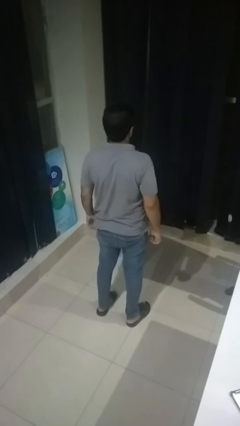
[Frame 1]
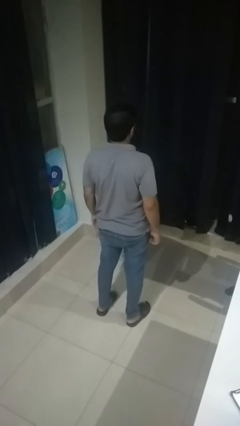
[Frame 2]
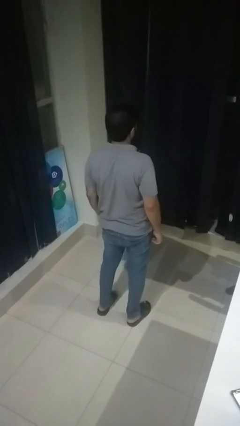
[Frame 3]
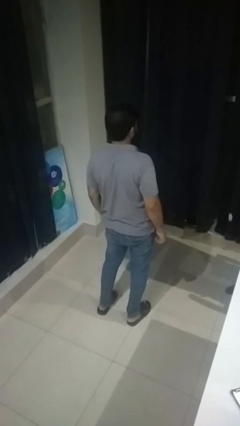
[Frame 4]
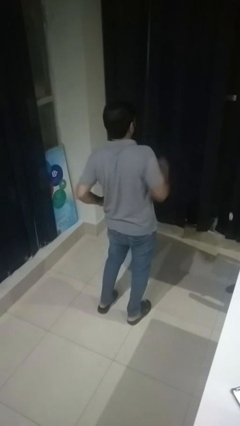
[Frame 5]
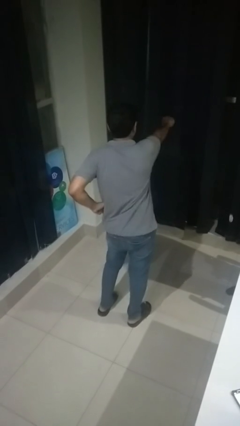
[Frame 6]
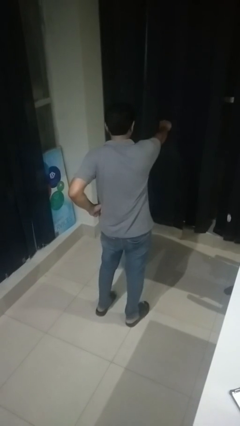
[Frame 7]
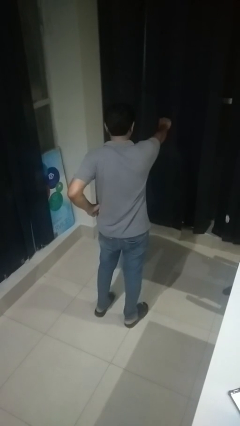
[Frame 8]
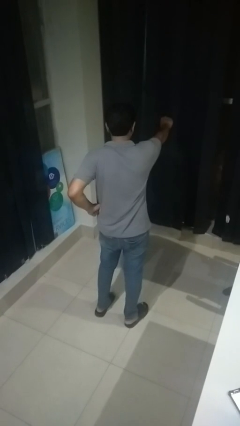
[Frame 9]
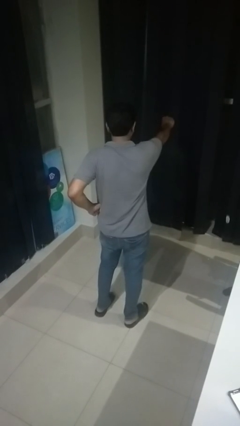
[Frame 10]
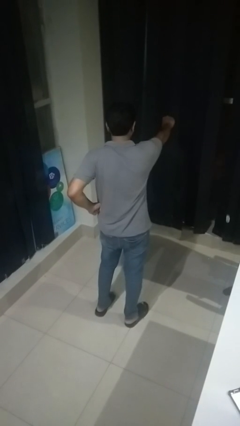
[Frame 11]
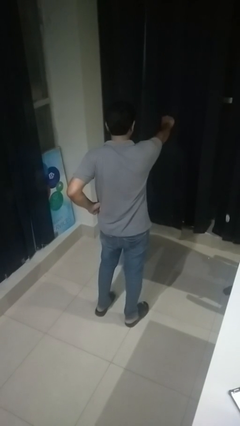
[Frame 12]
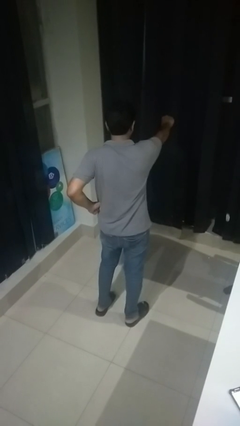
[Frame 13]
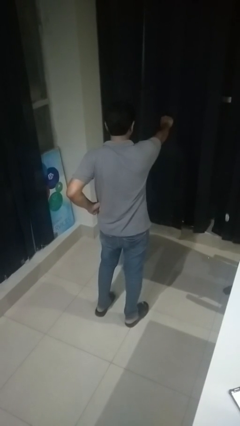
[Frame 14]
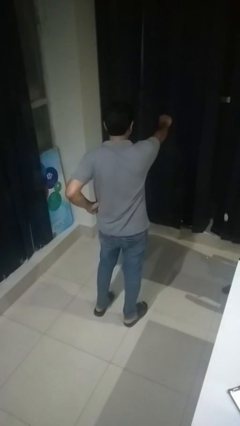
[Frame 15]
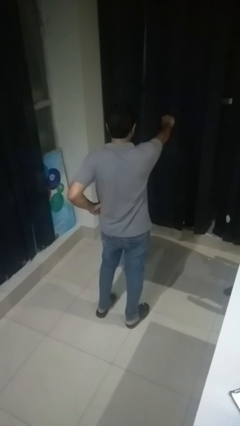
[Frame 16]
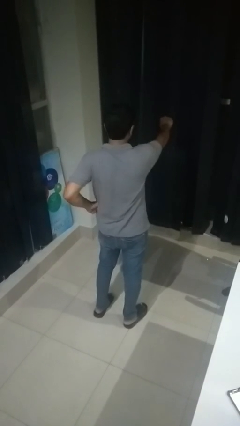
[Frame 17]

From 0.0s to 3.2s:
person punches

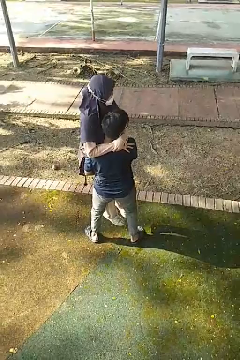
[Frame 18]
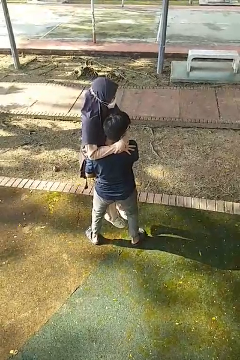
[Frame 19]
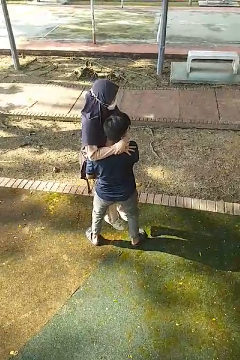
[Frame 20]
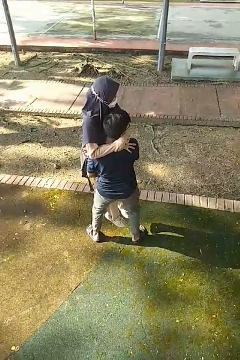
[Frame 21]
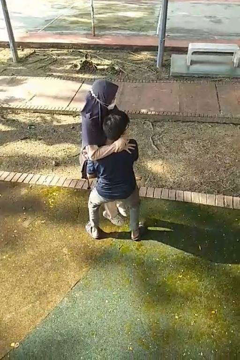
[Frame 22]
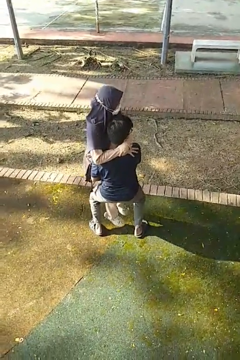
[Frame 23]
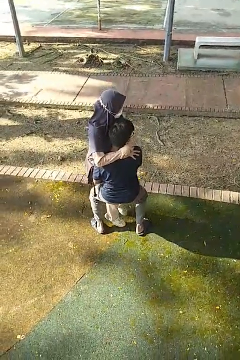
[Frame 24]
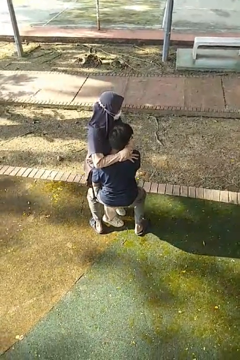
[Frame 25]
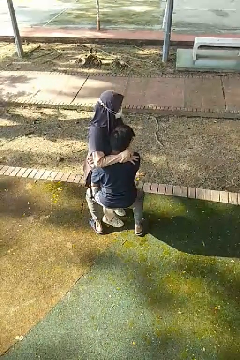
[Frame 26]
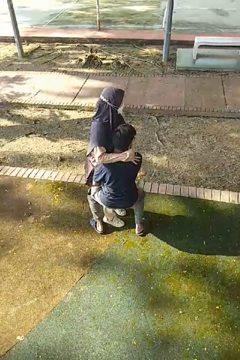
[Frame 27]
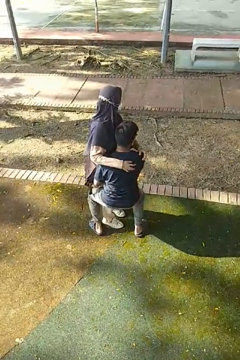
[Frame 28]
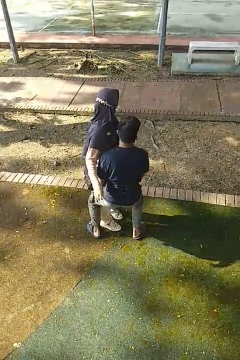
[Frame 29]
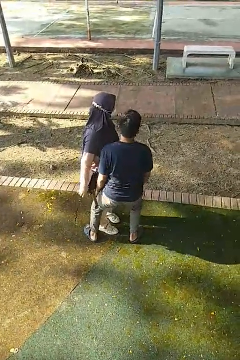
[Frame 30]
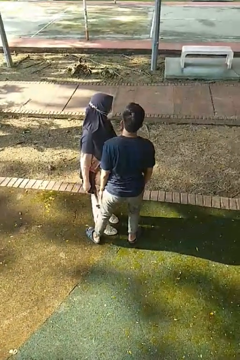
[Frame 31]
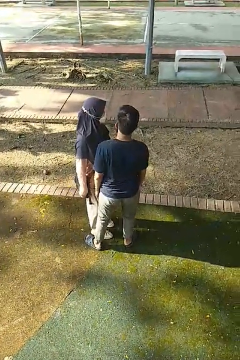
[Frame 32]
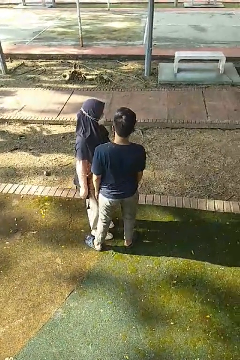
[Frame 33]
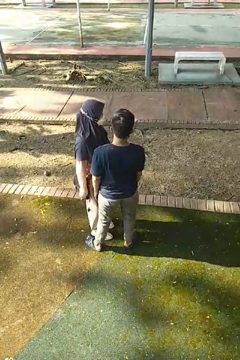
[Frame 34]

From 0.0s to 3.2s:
person puts down person

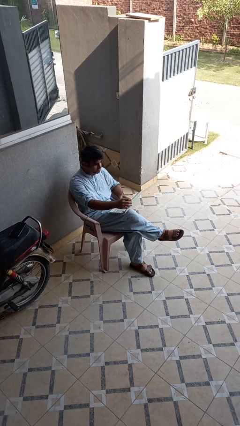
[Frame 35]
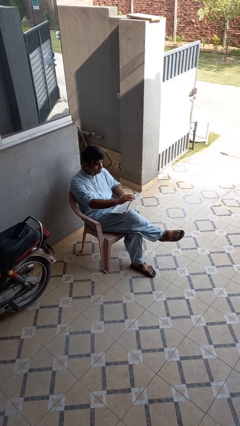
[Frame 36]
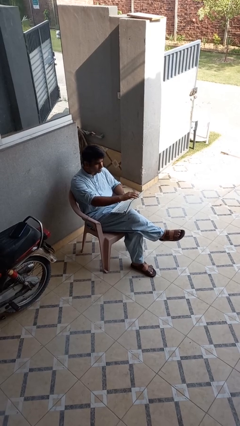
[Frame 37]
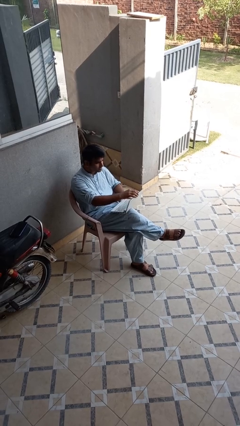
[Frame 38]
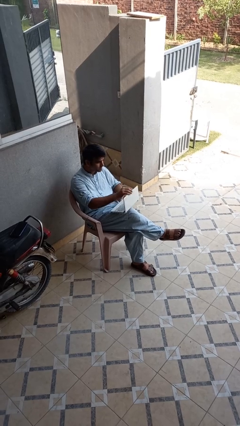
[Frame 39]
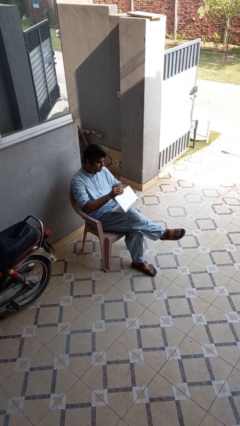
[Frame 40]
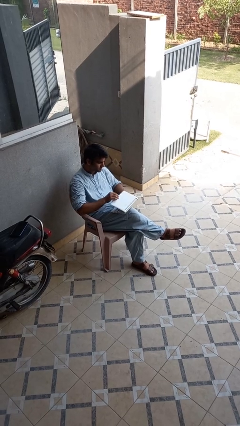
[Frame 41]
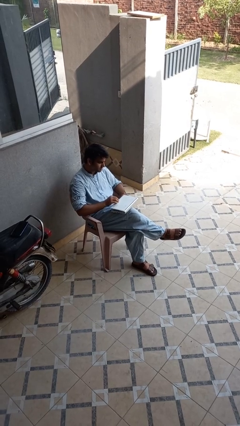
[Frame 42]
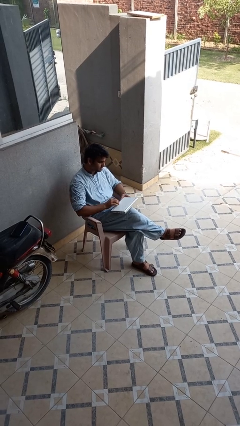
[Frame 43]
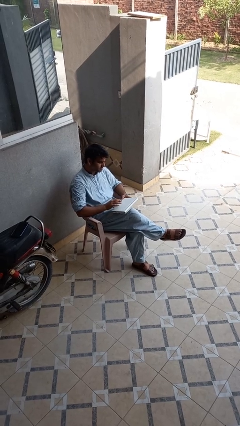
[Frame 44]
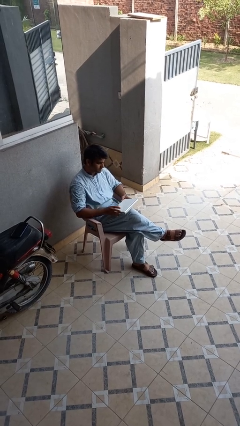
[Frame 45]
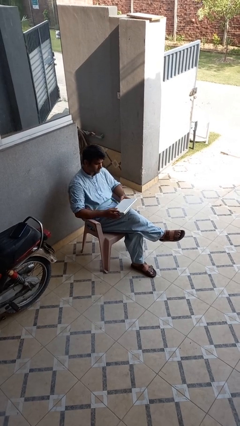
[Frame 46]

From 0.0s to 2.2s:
person closes laptop

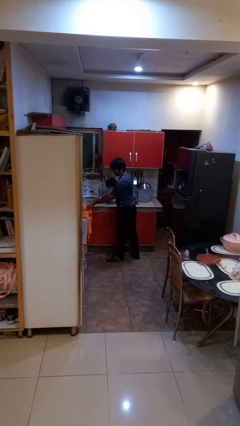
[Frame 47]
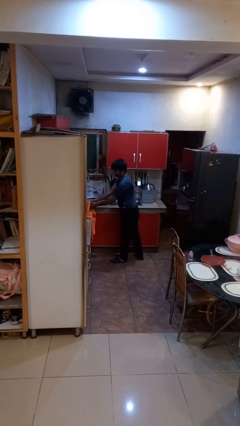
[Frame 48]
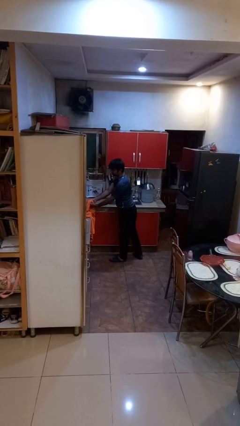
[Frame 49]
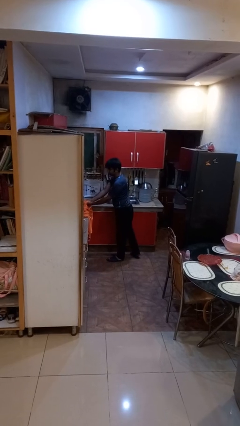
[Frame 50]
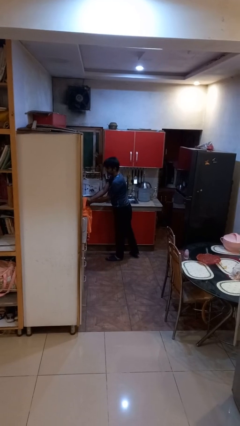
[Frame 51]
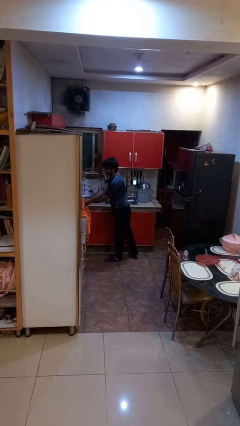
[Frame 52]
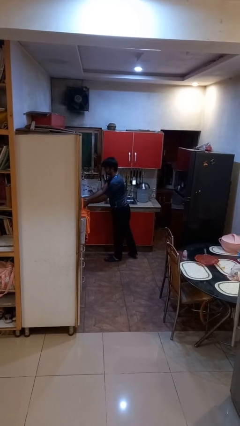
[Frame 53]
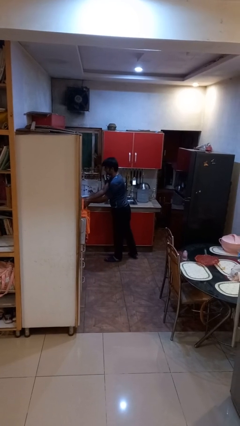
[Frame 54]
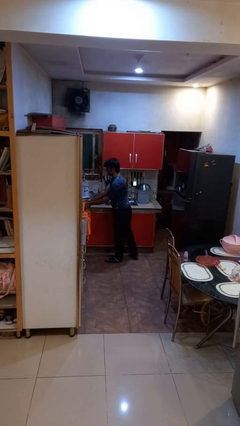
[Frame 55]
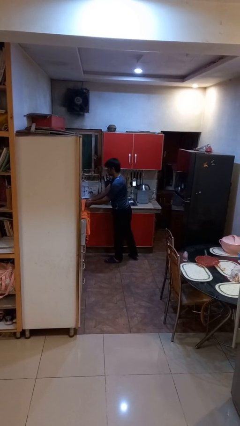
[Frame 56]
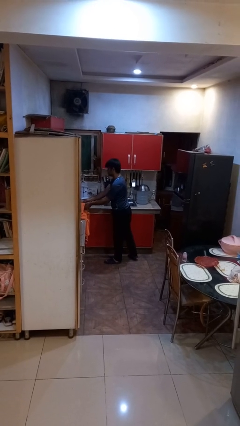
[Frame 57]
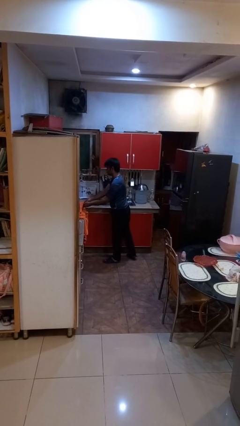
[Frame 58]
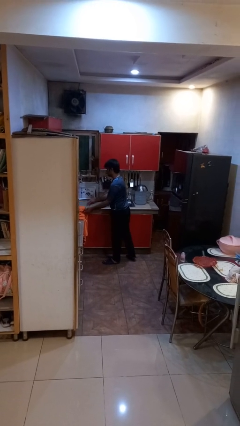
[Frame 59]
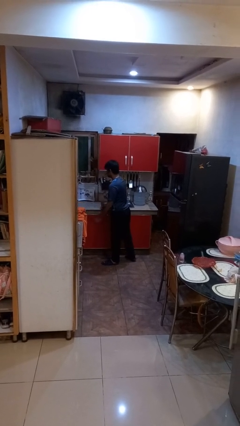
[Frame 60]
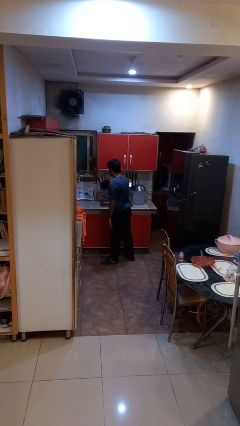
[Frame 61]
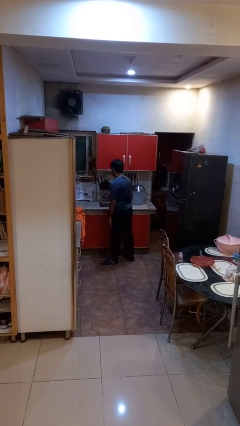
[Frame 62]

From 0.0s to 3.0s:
person dries hands with towel

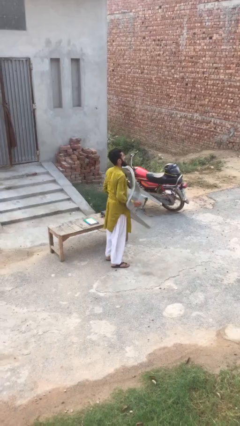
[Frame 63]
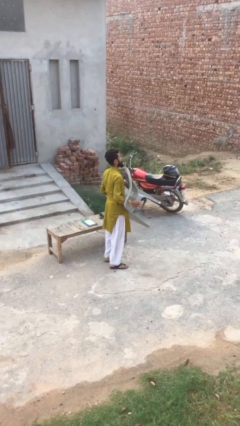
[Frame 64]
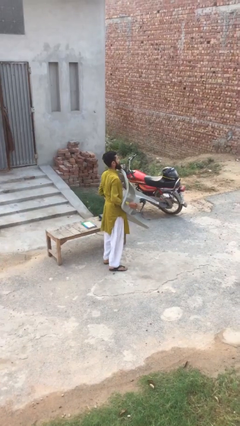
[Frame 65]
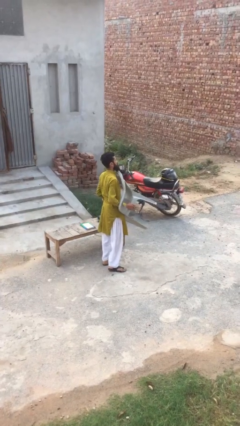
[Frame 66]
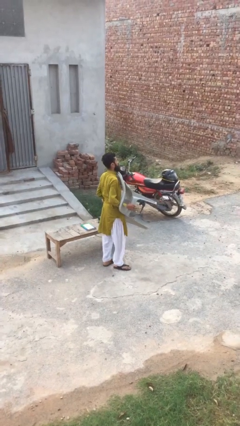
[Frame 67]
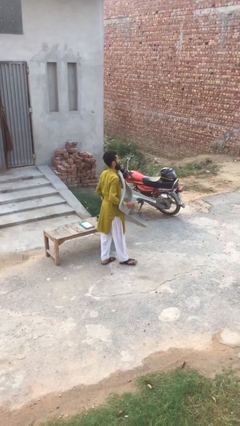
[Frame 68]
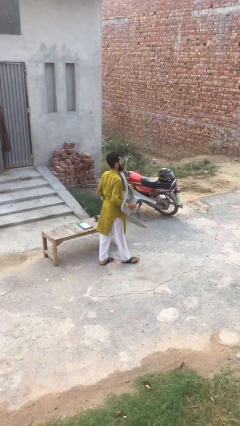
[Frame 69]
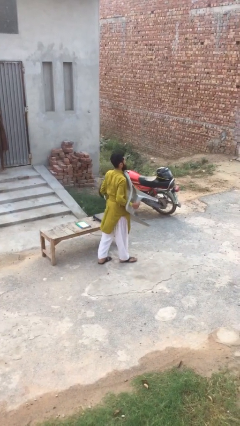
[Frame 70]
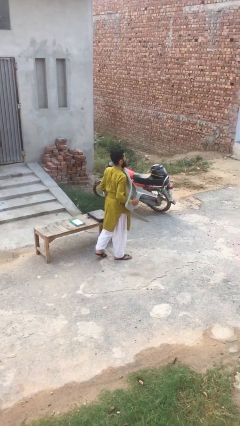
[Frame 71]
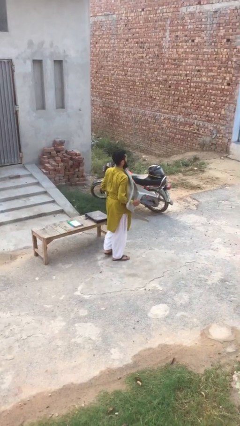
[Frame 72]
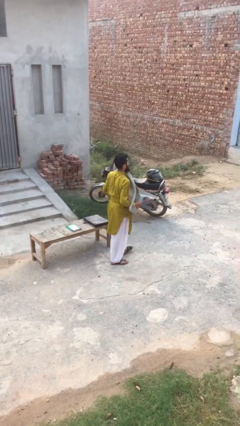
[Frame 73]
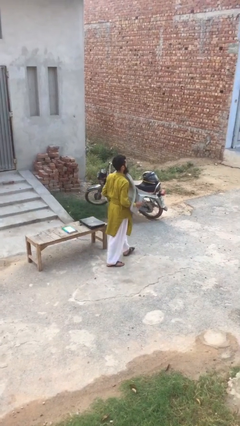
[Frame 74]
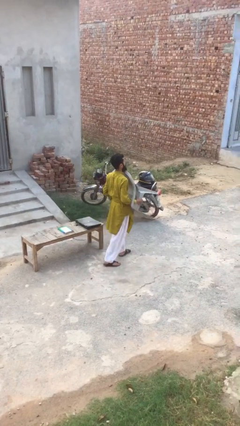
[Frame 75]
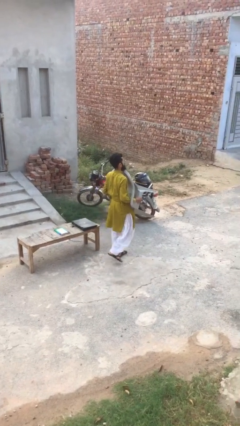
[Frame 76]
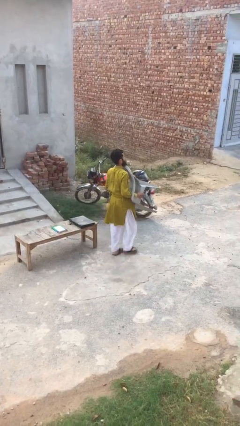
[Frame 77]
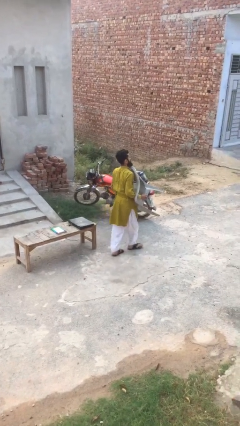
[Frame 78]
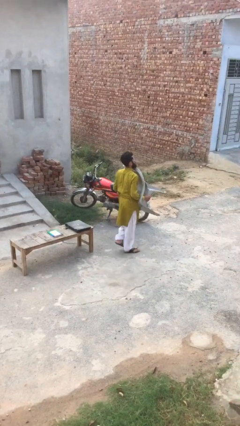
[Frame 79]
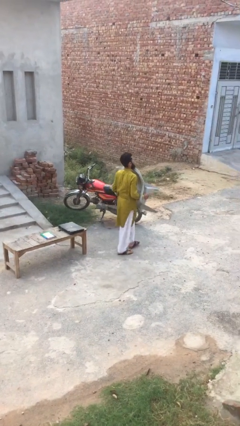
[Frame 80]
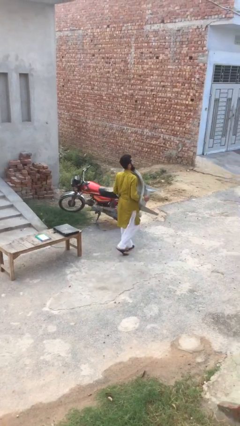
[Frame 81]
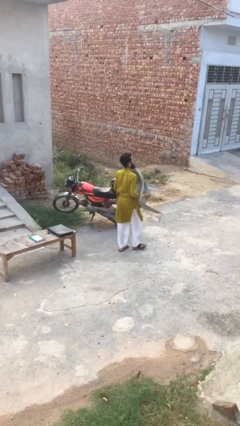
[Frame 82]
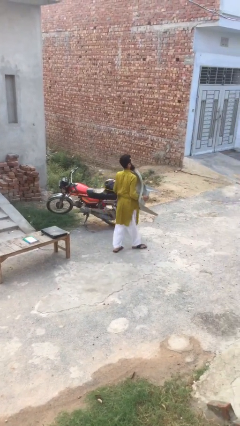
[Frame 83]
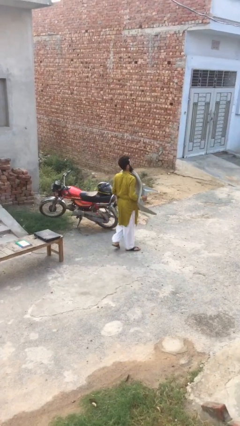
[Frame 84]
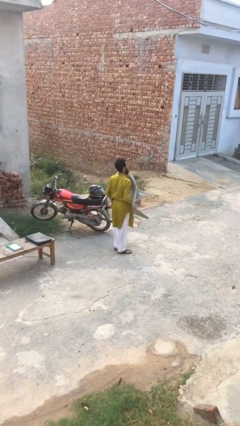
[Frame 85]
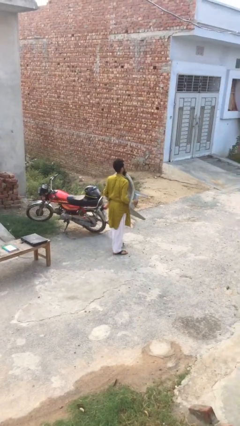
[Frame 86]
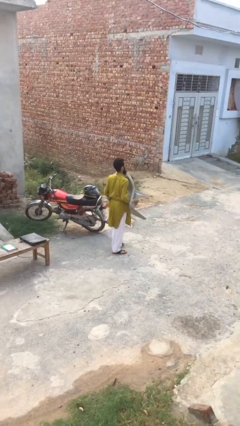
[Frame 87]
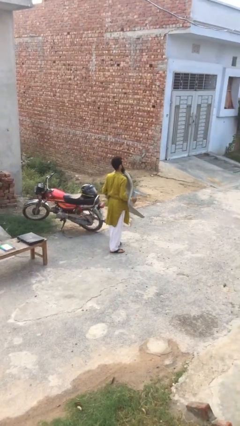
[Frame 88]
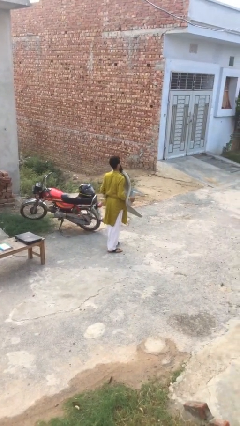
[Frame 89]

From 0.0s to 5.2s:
person carries heavy object

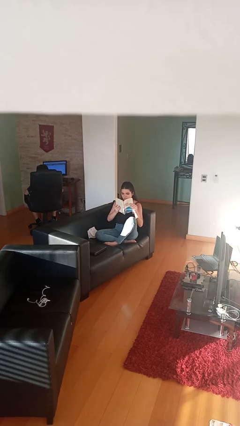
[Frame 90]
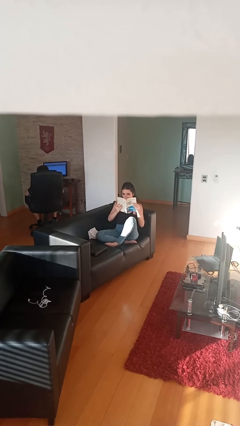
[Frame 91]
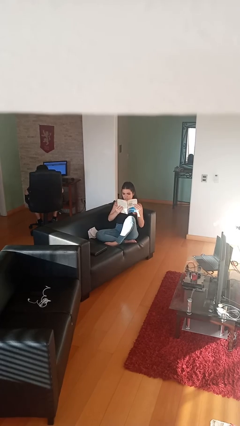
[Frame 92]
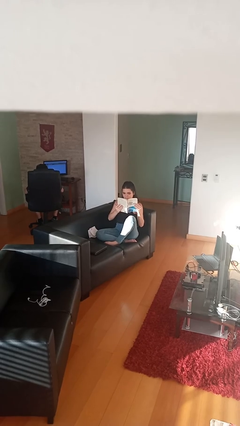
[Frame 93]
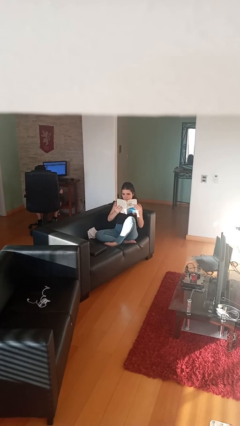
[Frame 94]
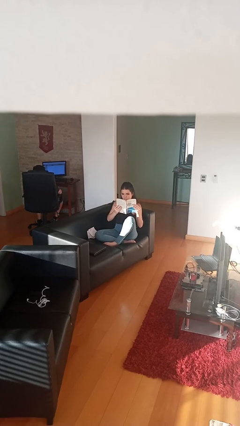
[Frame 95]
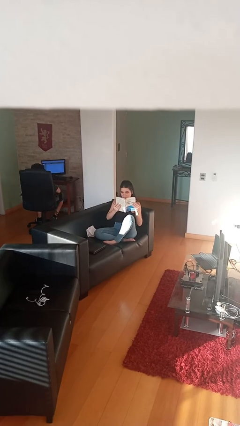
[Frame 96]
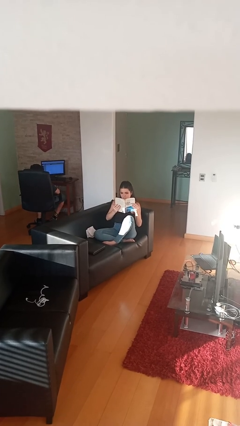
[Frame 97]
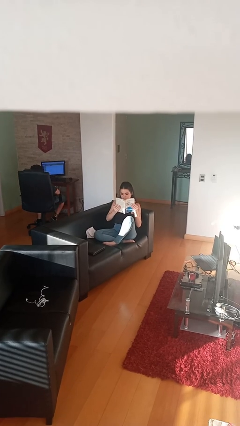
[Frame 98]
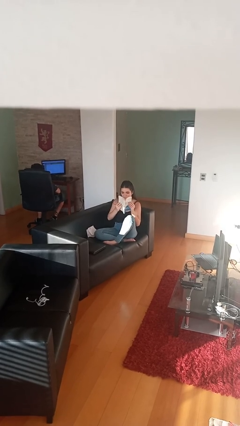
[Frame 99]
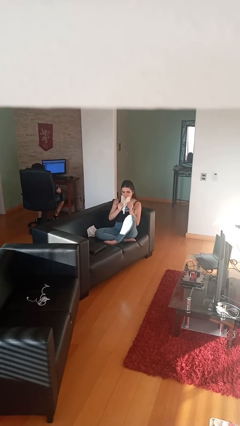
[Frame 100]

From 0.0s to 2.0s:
person reads document
